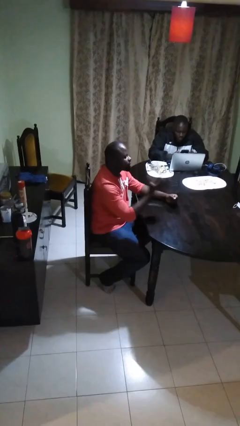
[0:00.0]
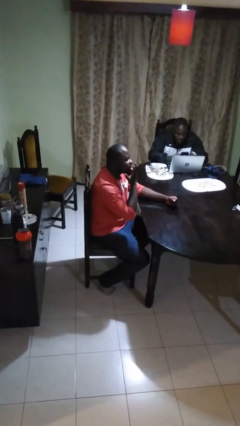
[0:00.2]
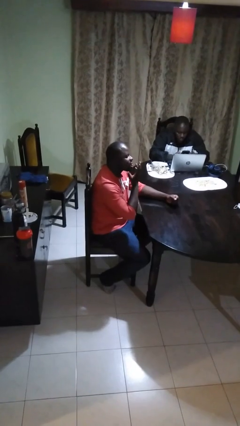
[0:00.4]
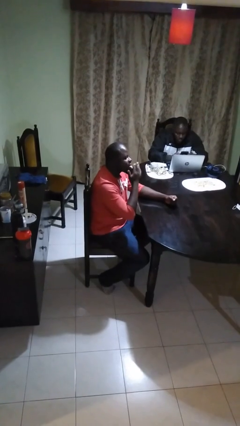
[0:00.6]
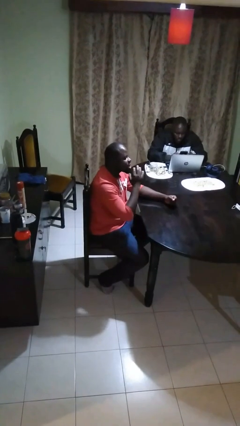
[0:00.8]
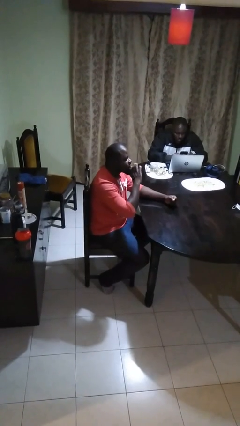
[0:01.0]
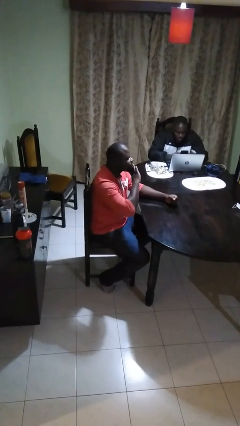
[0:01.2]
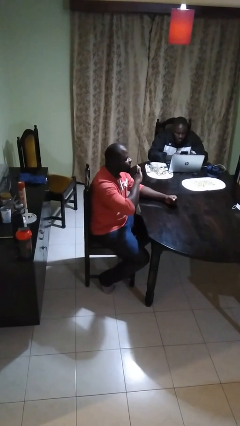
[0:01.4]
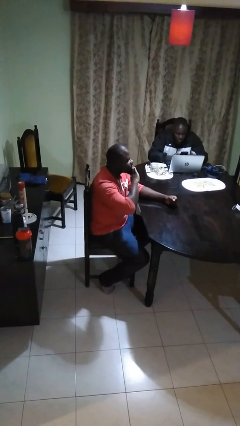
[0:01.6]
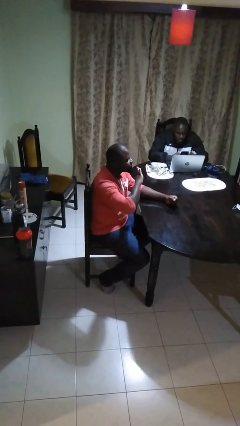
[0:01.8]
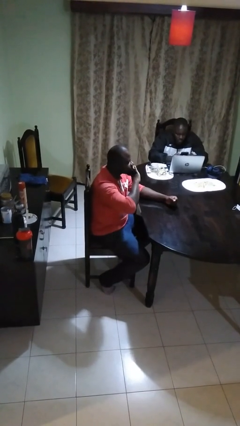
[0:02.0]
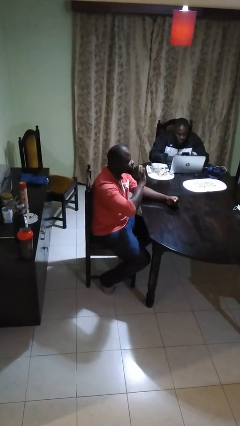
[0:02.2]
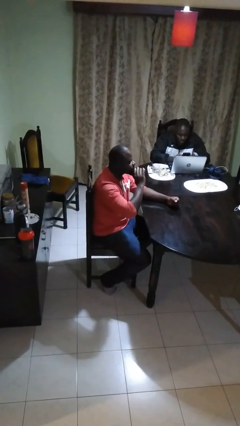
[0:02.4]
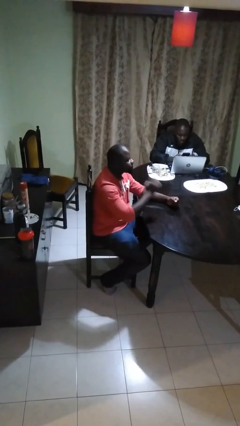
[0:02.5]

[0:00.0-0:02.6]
person licks fingers

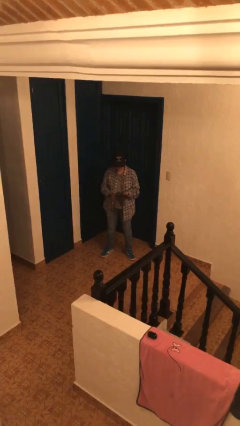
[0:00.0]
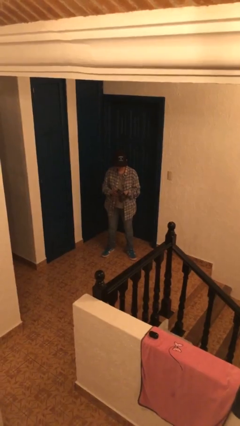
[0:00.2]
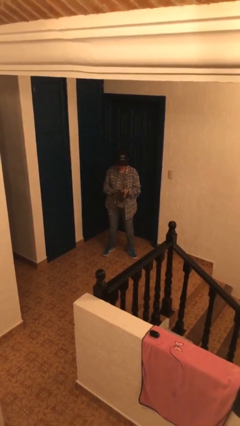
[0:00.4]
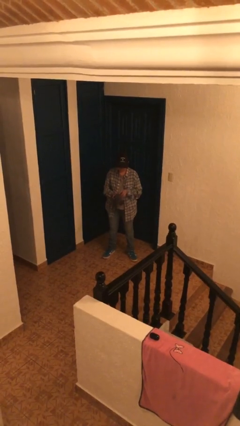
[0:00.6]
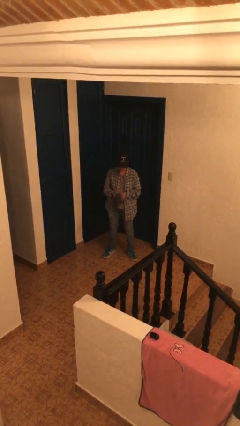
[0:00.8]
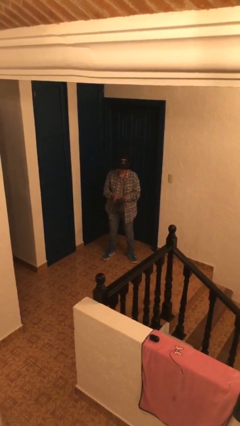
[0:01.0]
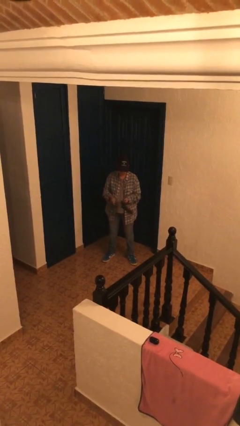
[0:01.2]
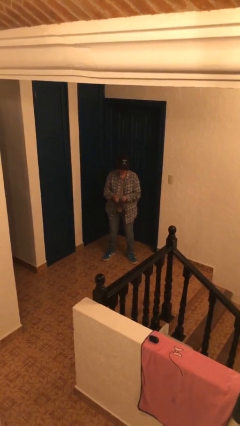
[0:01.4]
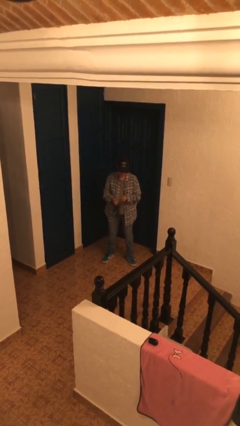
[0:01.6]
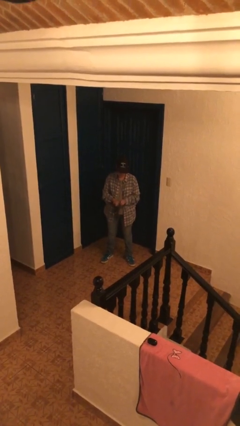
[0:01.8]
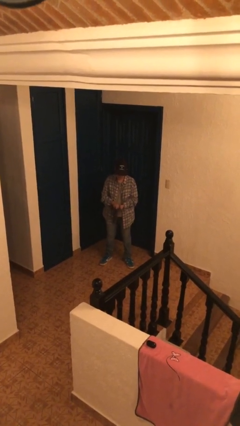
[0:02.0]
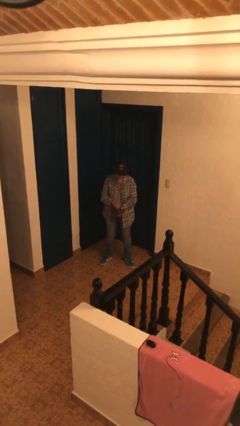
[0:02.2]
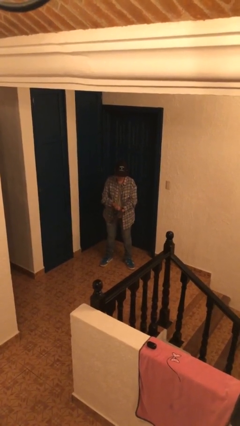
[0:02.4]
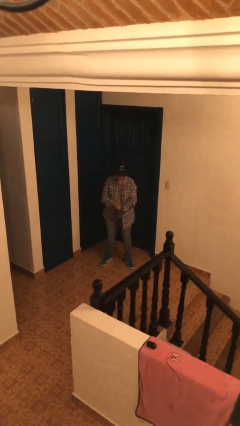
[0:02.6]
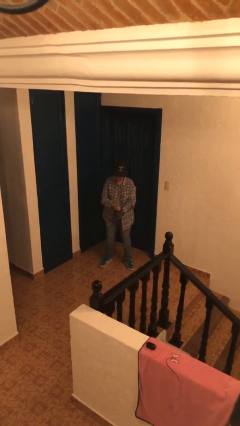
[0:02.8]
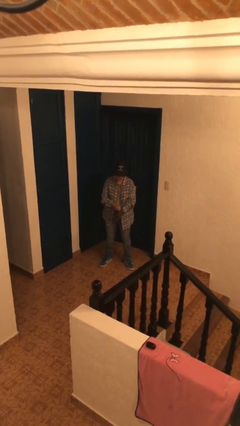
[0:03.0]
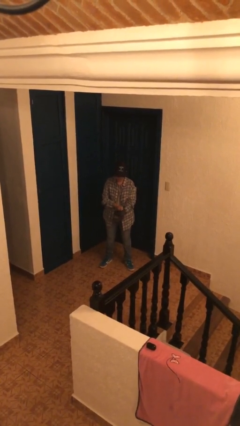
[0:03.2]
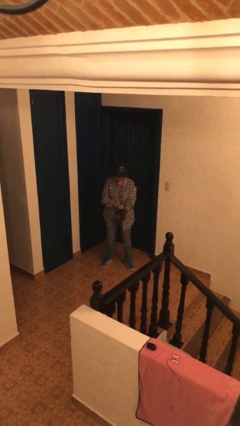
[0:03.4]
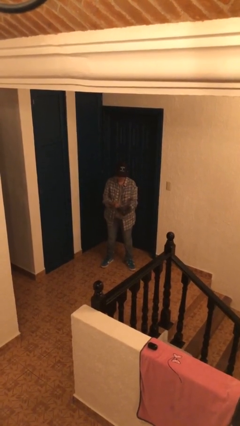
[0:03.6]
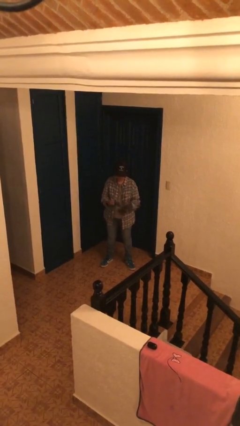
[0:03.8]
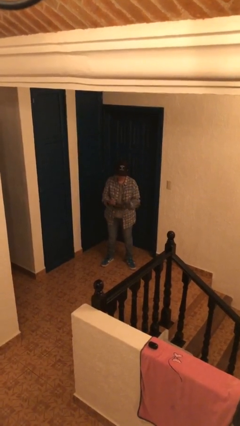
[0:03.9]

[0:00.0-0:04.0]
person puts on gloves

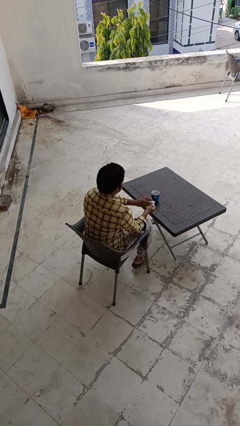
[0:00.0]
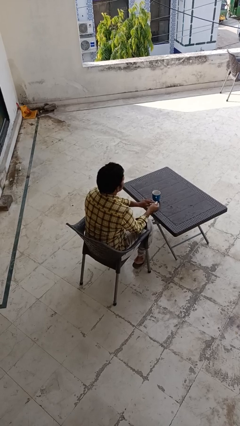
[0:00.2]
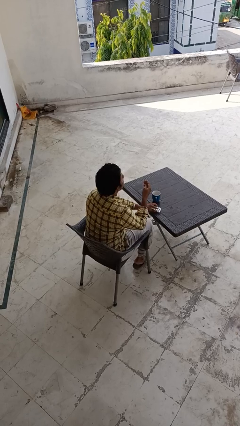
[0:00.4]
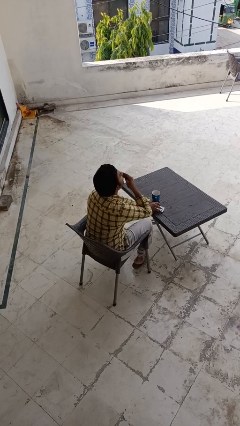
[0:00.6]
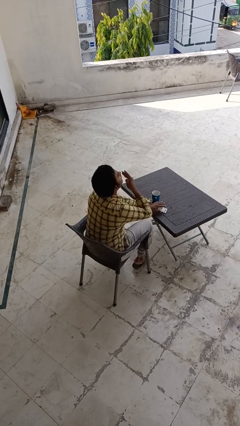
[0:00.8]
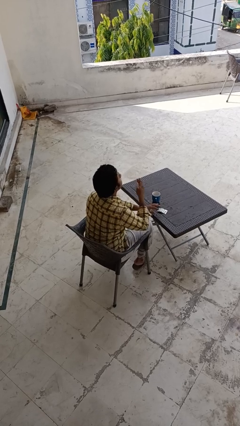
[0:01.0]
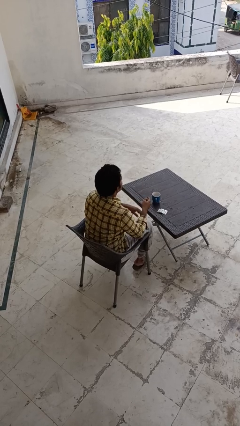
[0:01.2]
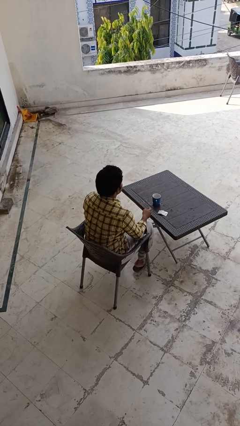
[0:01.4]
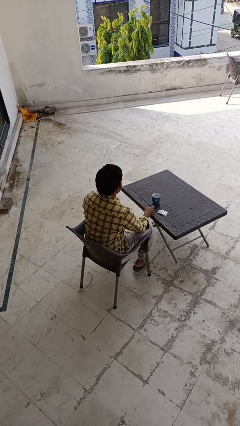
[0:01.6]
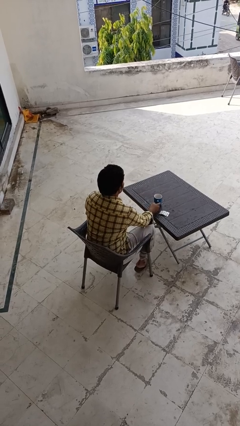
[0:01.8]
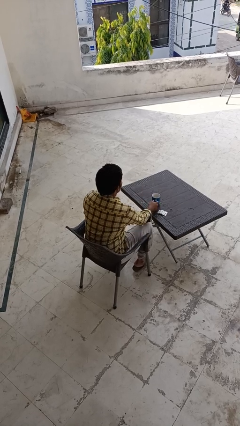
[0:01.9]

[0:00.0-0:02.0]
person takes medicine pills

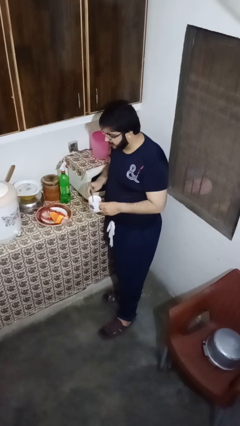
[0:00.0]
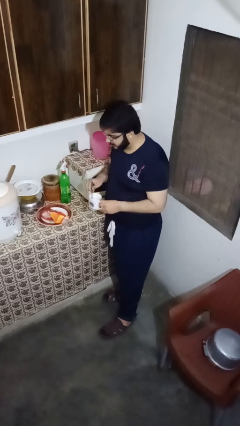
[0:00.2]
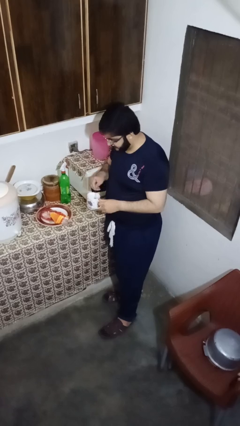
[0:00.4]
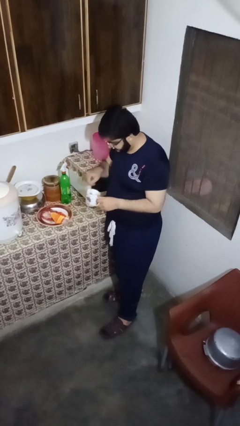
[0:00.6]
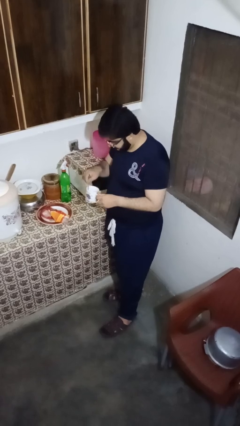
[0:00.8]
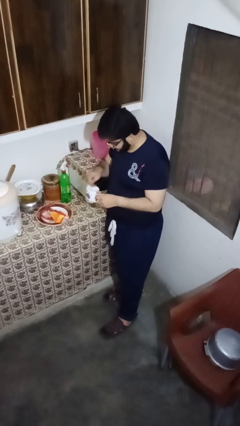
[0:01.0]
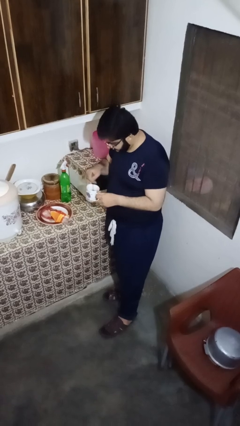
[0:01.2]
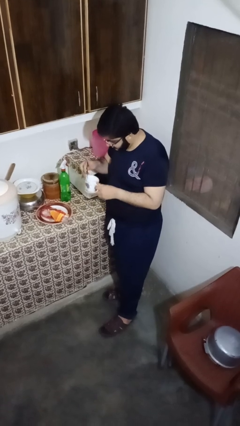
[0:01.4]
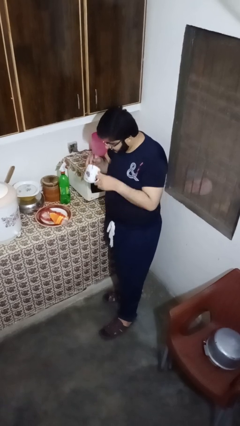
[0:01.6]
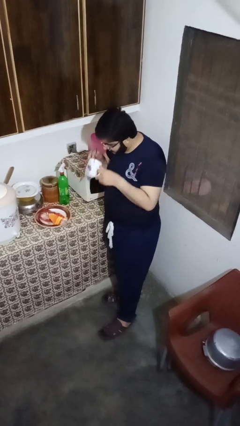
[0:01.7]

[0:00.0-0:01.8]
person stirs mug

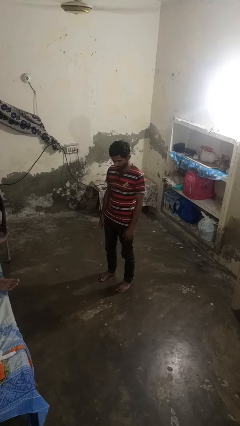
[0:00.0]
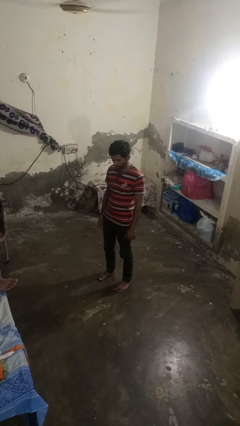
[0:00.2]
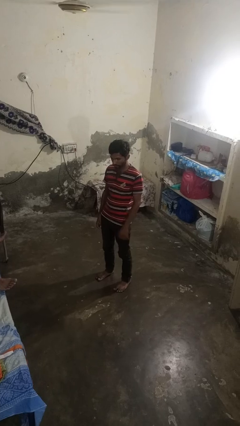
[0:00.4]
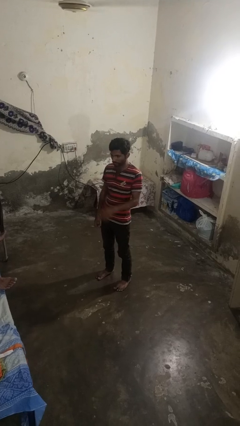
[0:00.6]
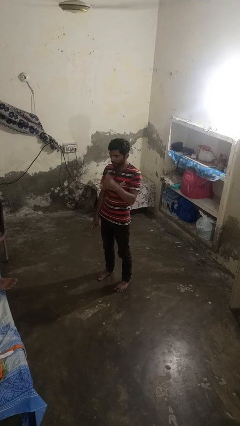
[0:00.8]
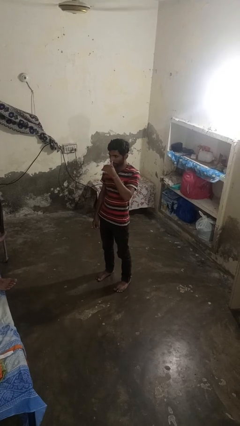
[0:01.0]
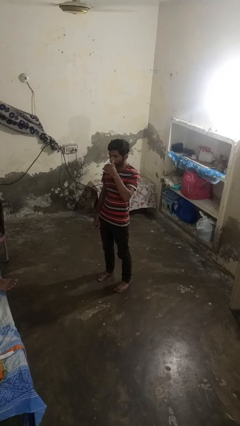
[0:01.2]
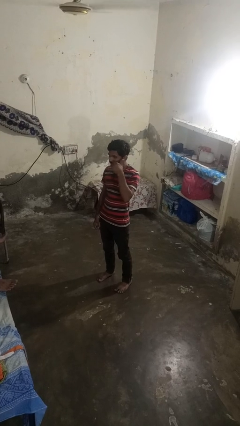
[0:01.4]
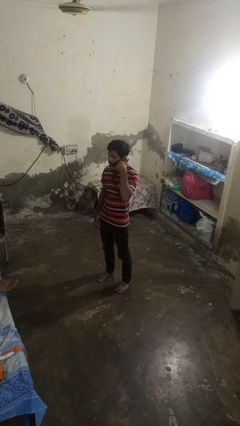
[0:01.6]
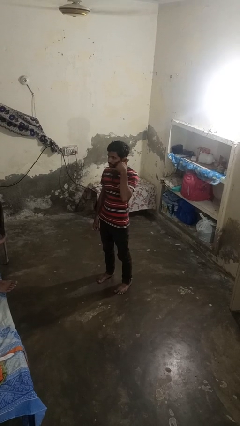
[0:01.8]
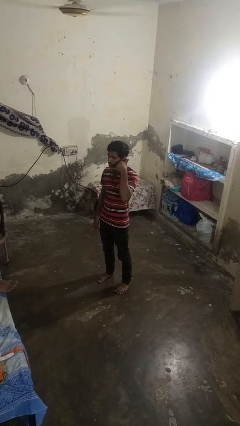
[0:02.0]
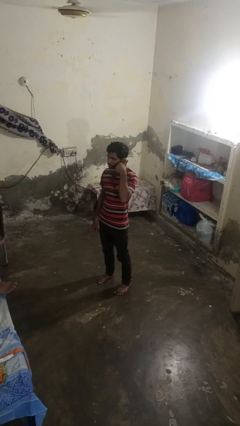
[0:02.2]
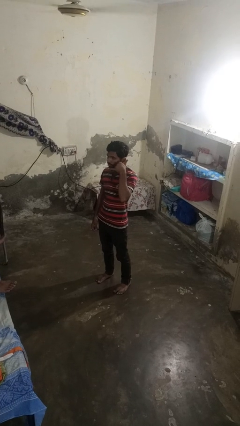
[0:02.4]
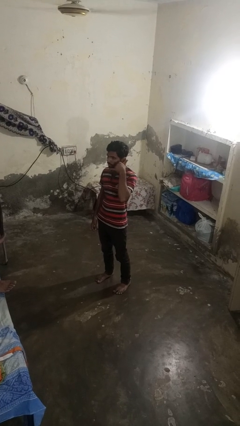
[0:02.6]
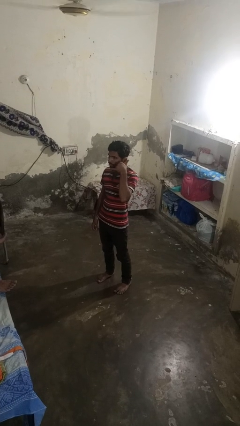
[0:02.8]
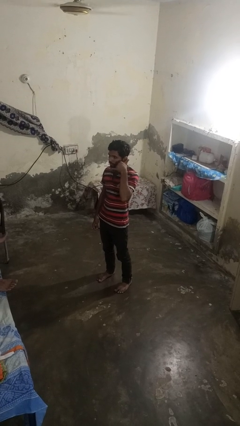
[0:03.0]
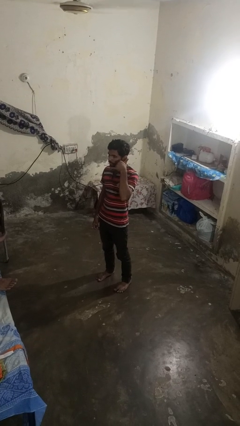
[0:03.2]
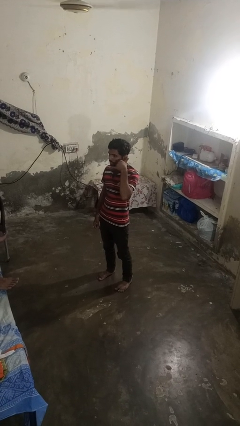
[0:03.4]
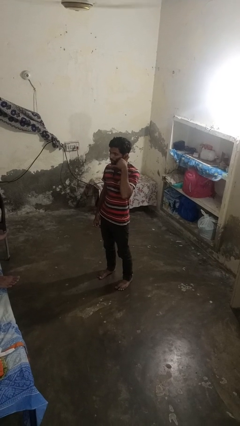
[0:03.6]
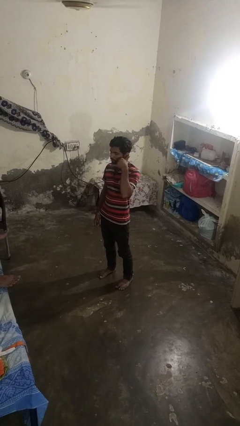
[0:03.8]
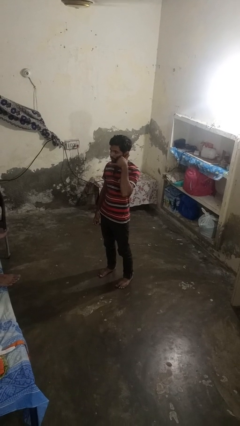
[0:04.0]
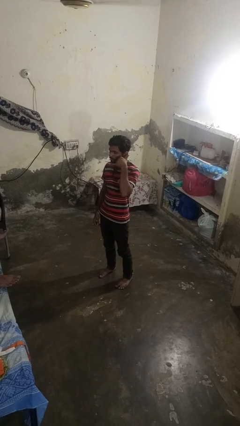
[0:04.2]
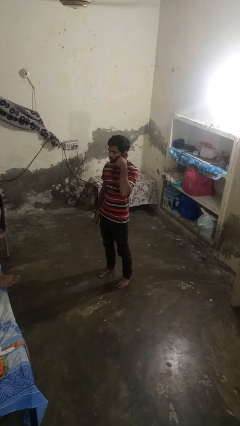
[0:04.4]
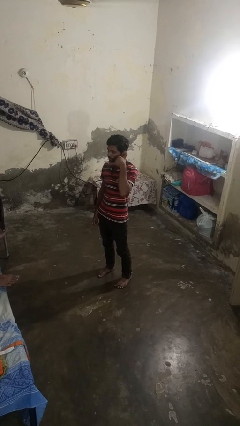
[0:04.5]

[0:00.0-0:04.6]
person gestures call me

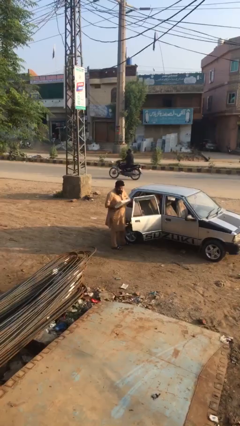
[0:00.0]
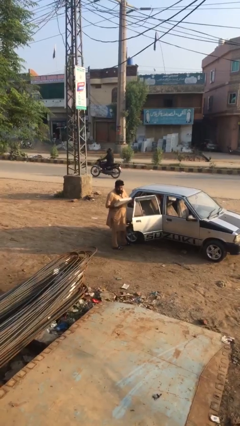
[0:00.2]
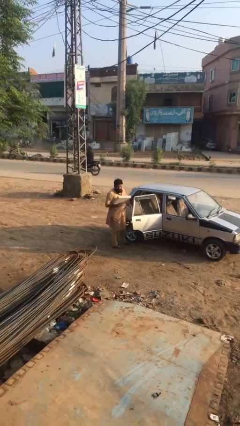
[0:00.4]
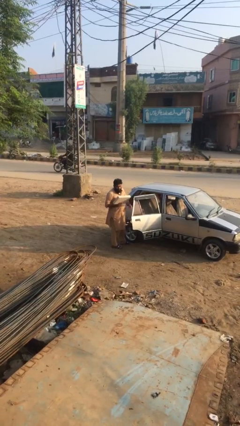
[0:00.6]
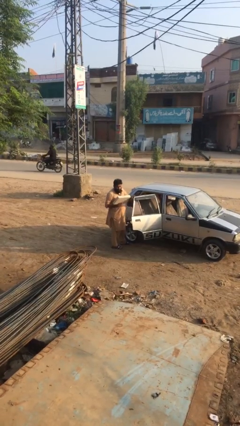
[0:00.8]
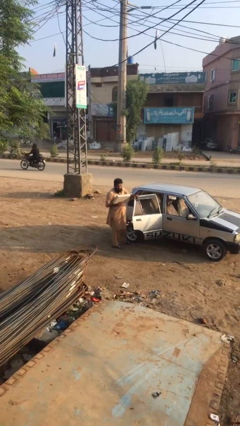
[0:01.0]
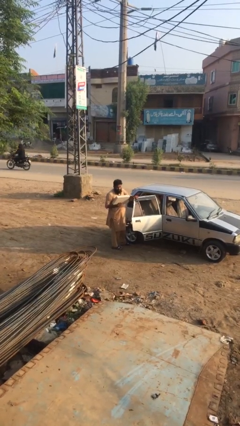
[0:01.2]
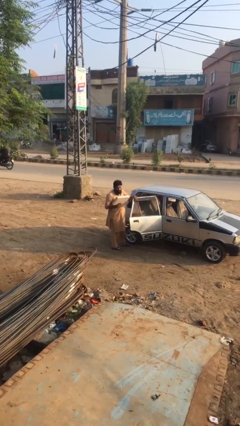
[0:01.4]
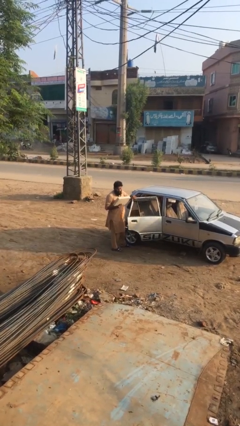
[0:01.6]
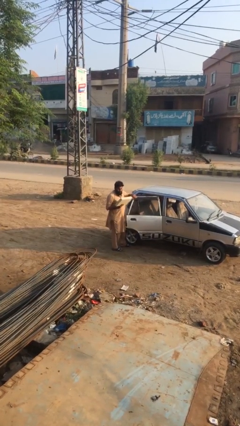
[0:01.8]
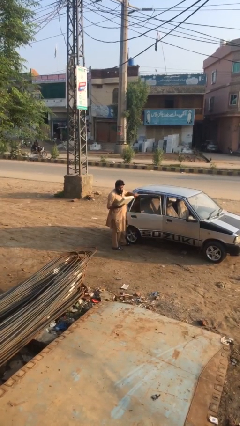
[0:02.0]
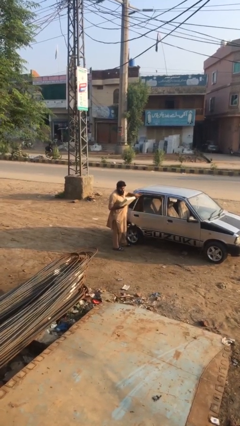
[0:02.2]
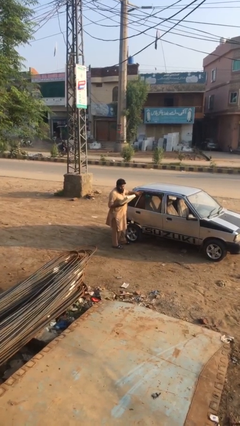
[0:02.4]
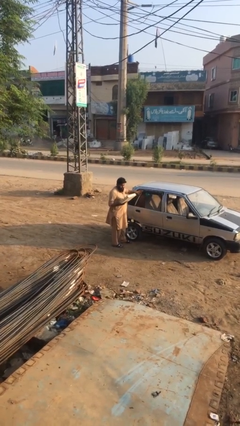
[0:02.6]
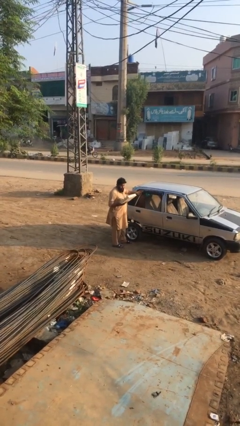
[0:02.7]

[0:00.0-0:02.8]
person closes car door
